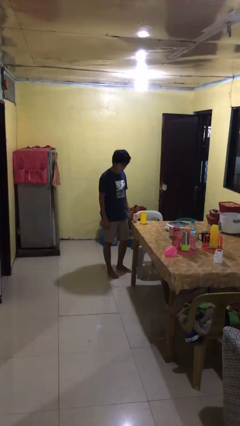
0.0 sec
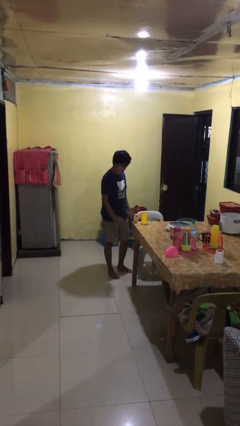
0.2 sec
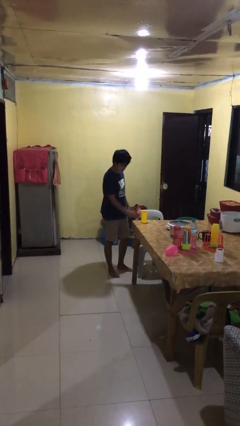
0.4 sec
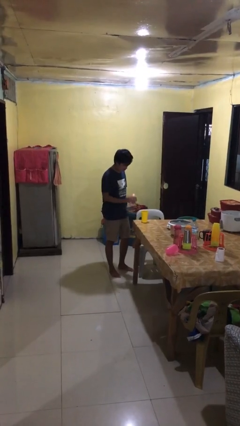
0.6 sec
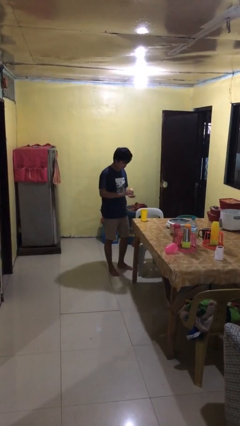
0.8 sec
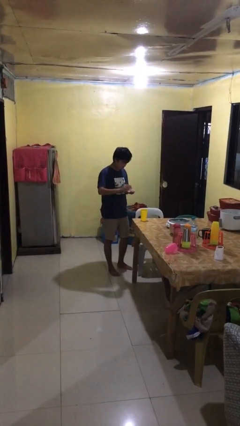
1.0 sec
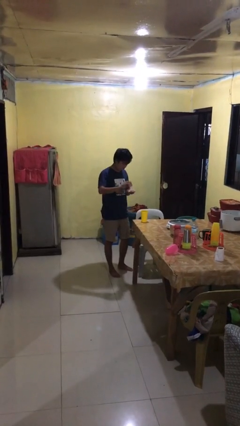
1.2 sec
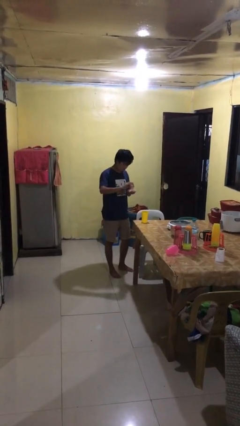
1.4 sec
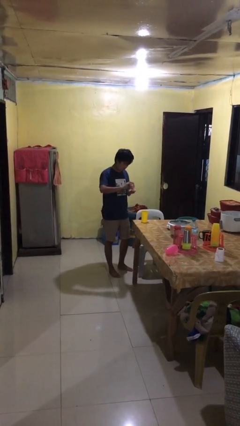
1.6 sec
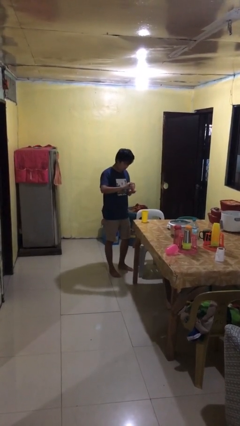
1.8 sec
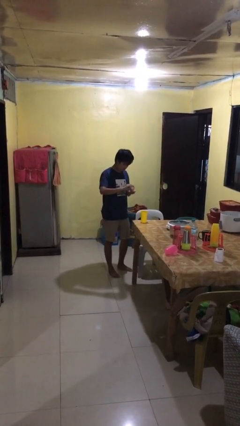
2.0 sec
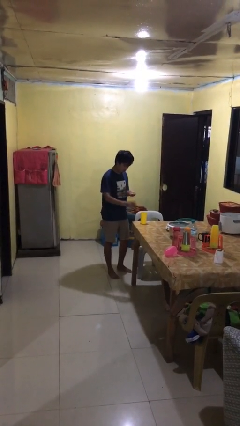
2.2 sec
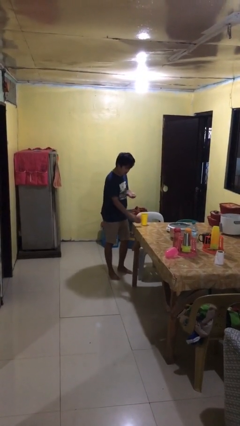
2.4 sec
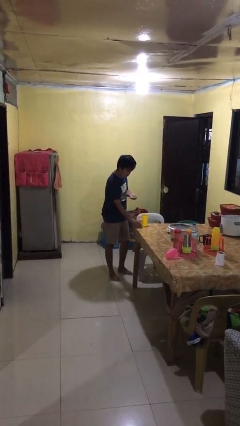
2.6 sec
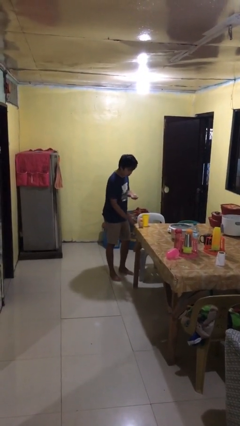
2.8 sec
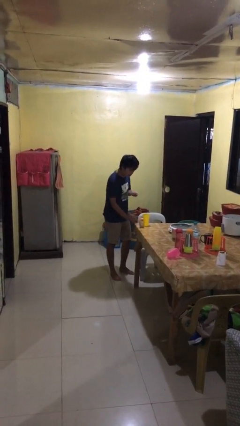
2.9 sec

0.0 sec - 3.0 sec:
person takes medicine pills

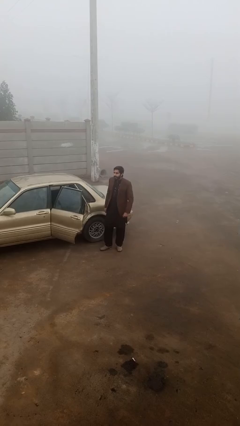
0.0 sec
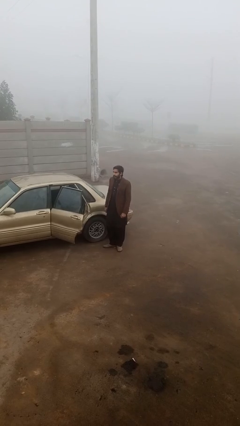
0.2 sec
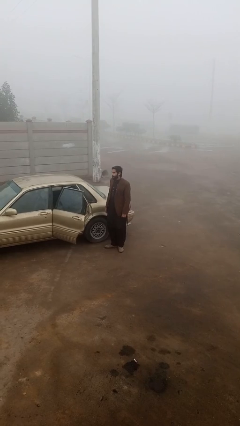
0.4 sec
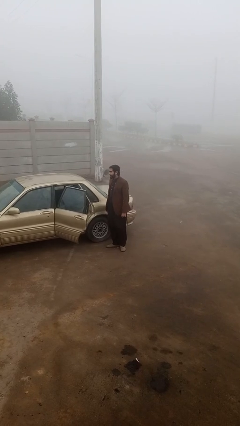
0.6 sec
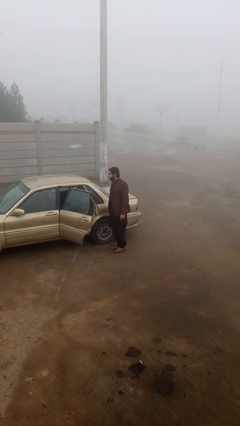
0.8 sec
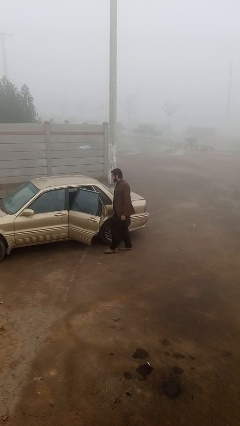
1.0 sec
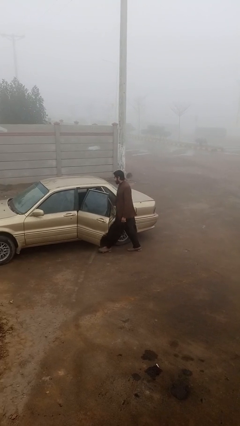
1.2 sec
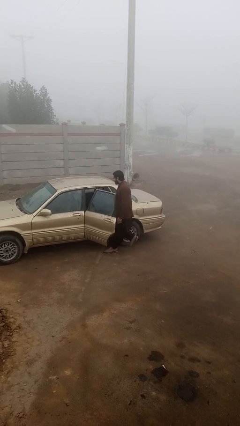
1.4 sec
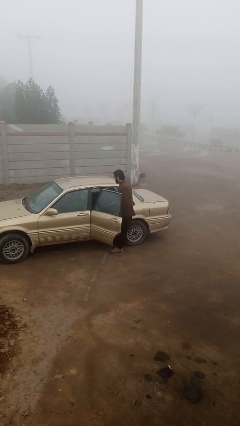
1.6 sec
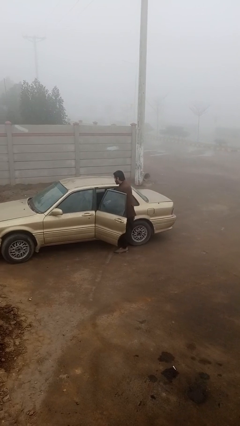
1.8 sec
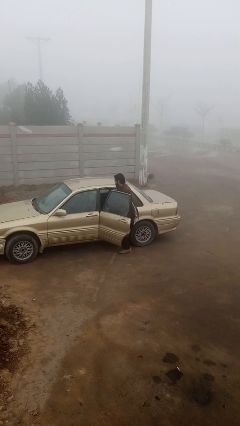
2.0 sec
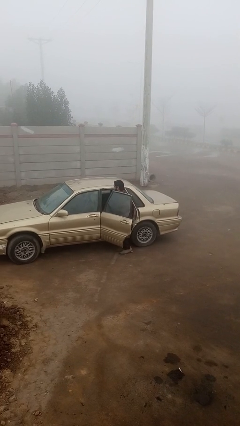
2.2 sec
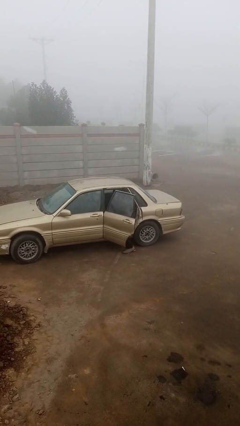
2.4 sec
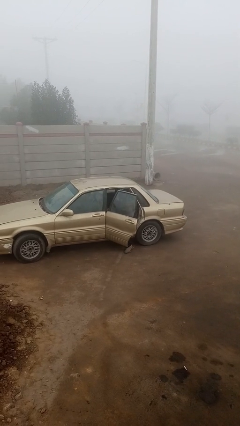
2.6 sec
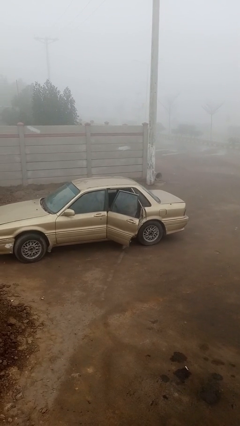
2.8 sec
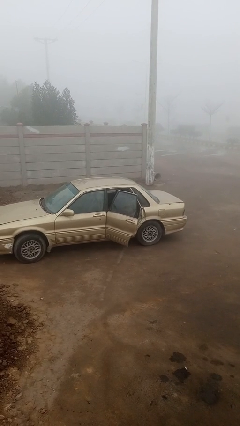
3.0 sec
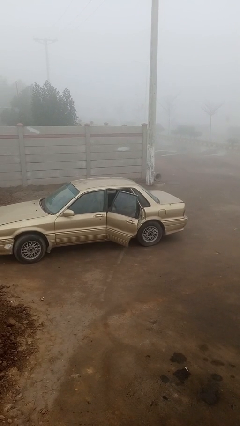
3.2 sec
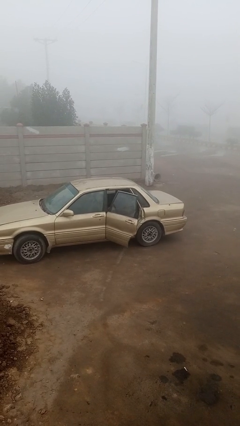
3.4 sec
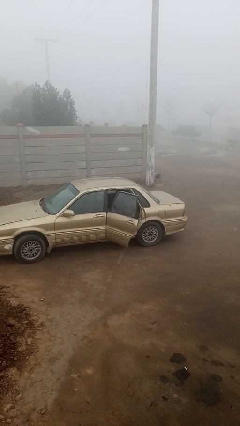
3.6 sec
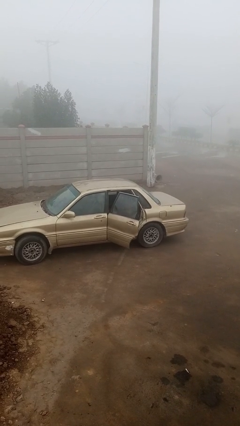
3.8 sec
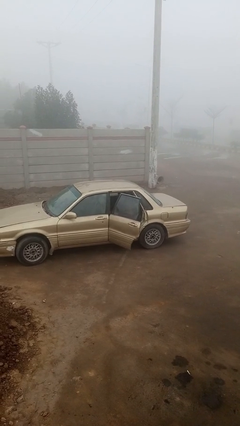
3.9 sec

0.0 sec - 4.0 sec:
person enters car

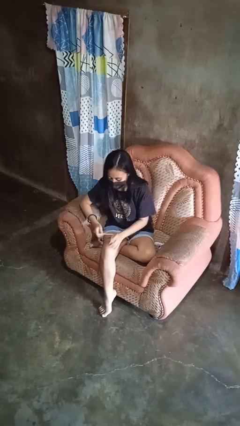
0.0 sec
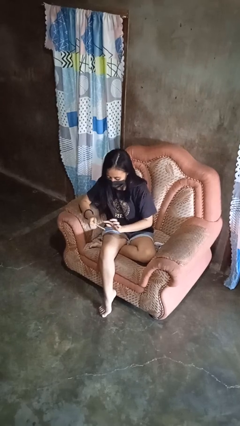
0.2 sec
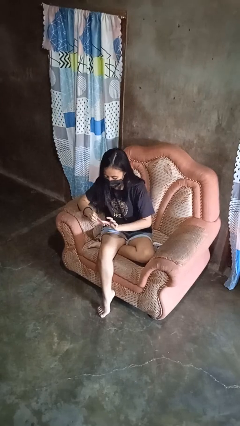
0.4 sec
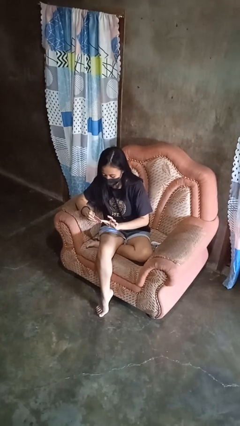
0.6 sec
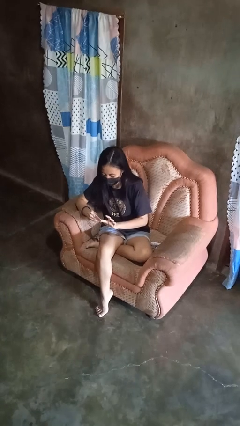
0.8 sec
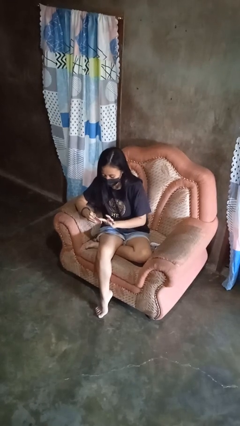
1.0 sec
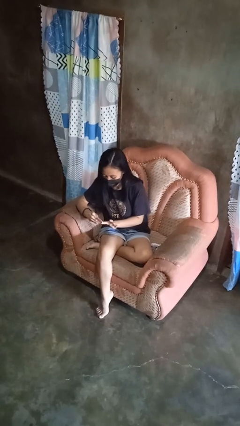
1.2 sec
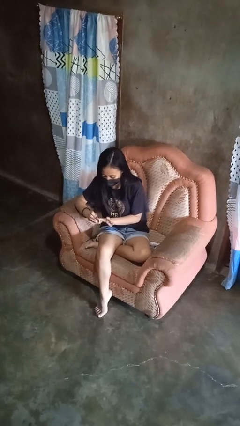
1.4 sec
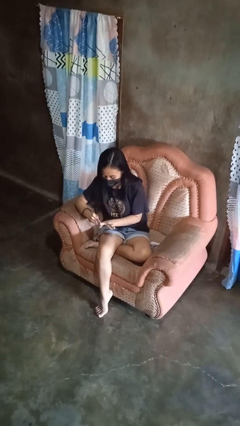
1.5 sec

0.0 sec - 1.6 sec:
person files fingernails

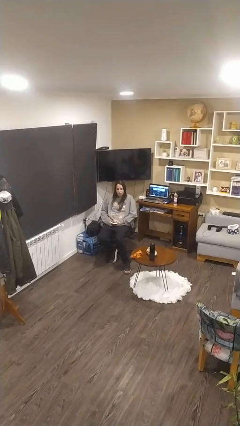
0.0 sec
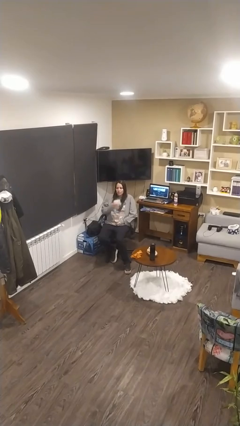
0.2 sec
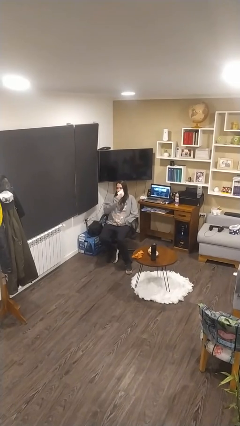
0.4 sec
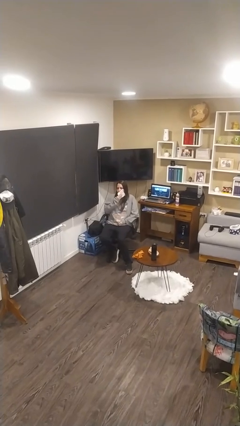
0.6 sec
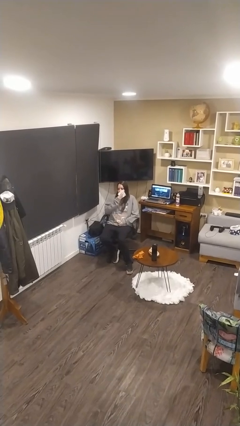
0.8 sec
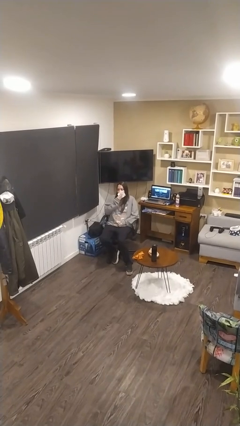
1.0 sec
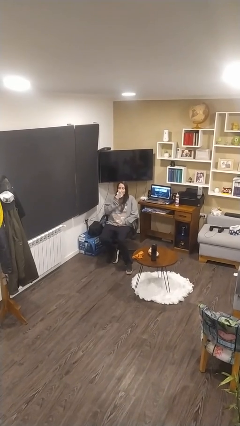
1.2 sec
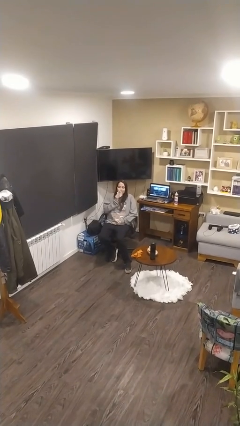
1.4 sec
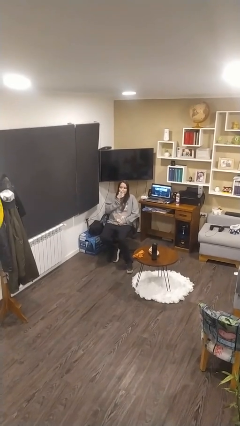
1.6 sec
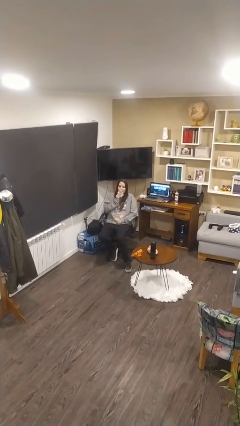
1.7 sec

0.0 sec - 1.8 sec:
person wipes mouth with napkin

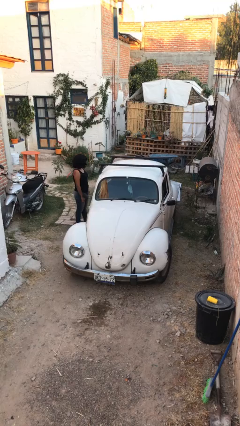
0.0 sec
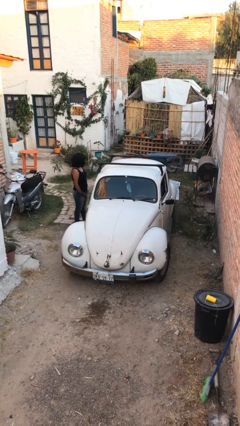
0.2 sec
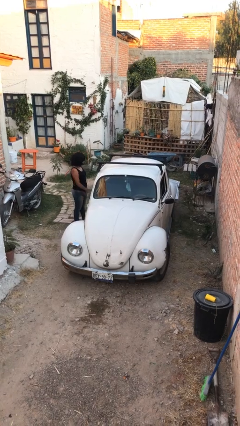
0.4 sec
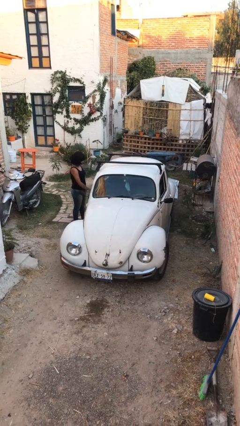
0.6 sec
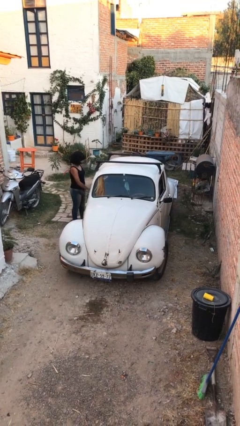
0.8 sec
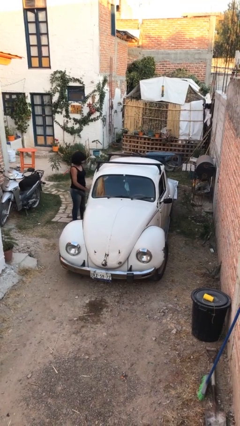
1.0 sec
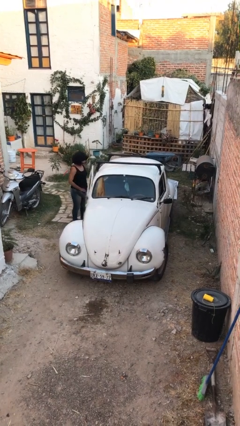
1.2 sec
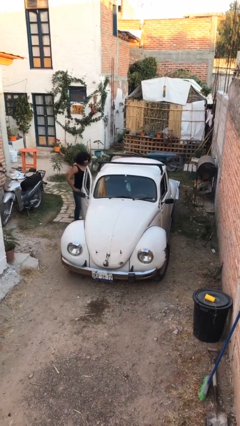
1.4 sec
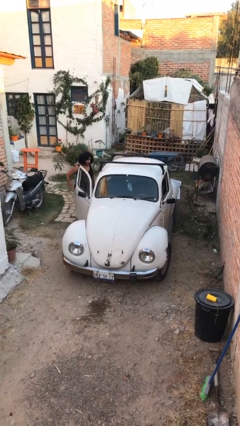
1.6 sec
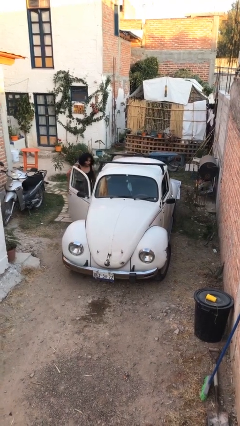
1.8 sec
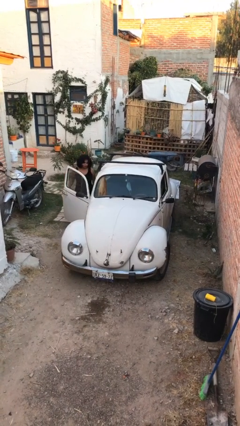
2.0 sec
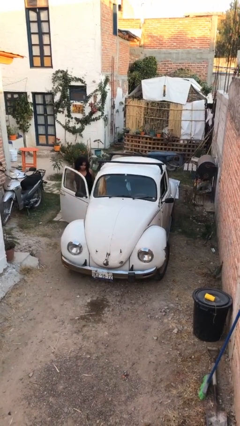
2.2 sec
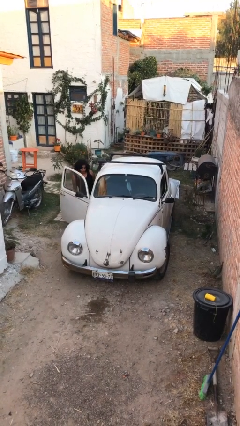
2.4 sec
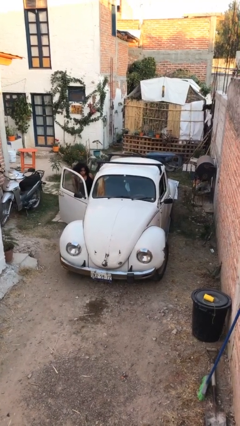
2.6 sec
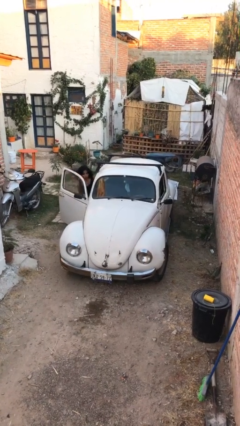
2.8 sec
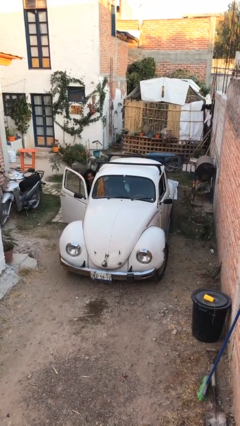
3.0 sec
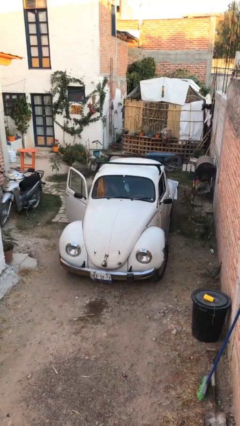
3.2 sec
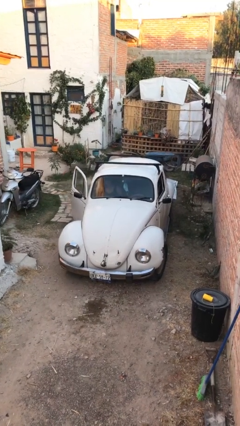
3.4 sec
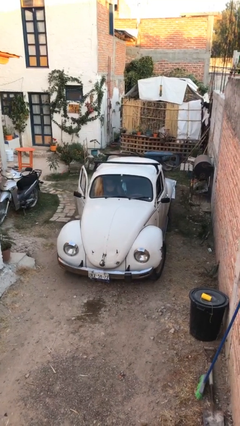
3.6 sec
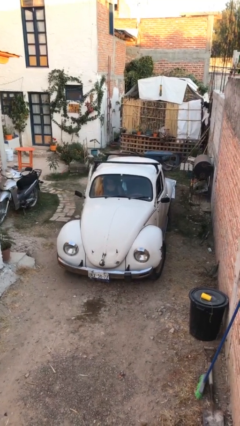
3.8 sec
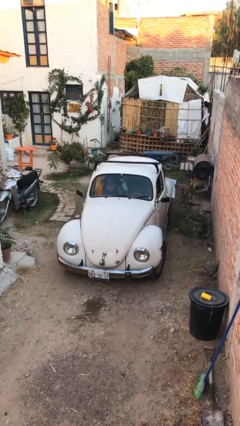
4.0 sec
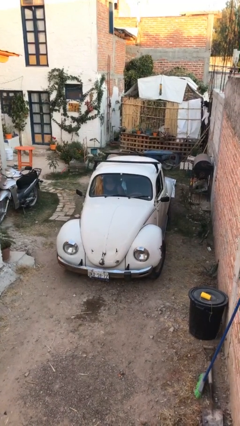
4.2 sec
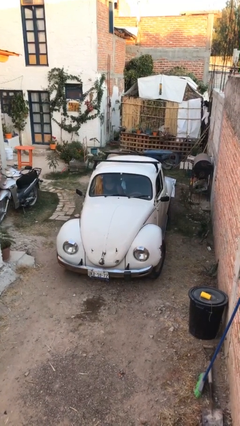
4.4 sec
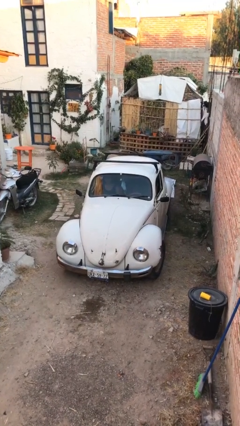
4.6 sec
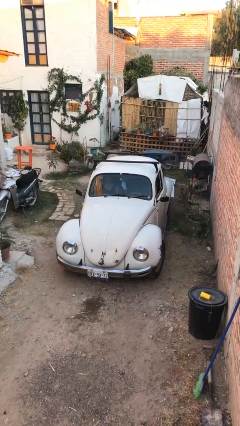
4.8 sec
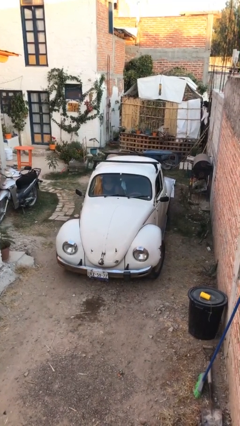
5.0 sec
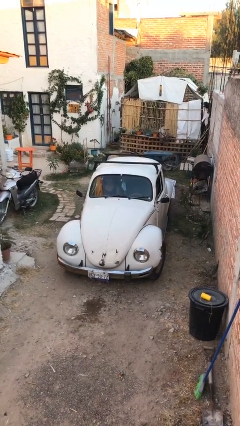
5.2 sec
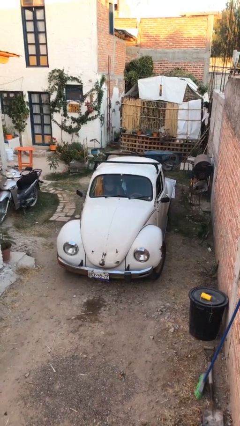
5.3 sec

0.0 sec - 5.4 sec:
car picks up person

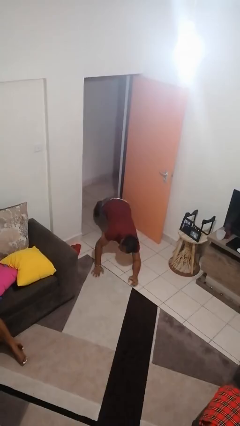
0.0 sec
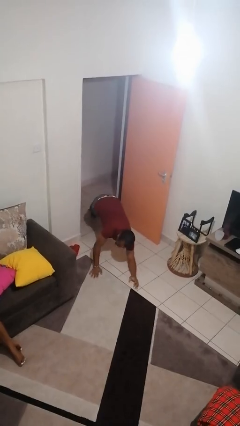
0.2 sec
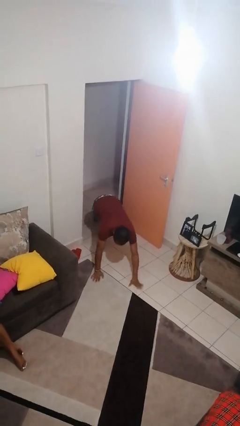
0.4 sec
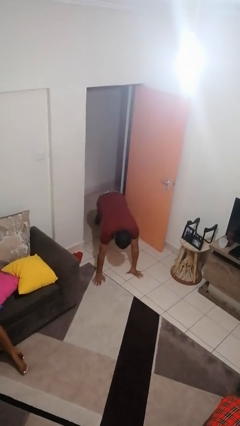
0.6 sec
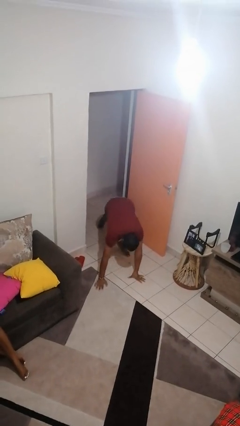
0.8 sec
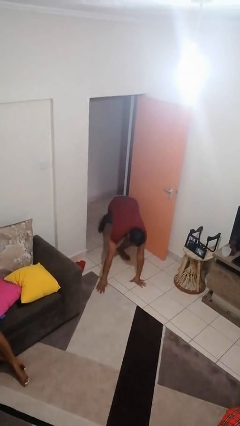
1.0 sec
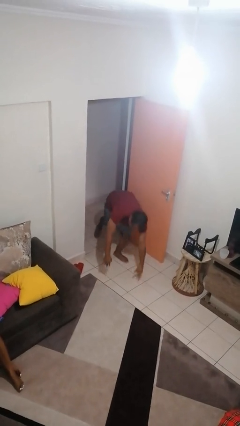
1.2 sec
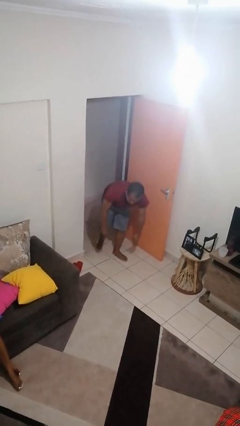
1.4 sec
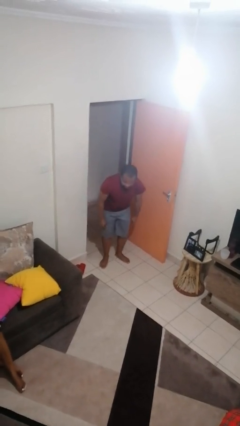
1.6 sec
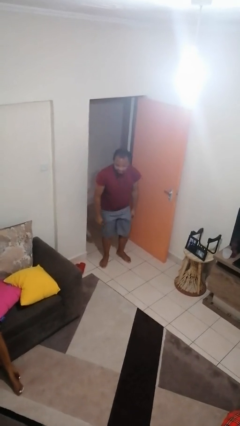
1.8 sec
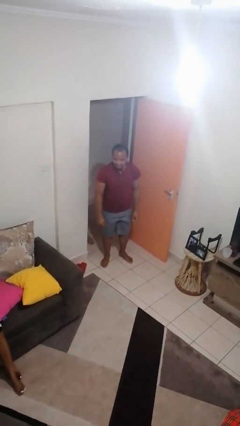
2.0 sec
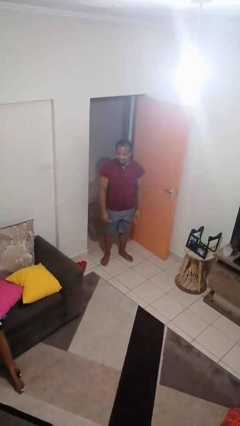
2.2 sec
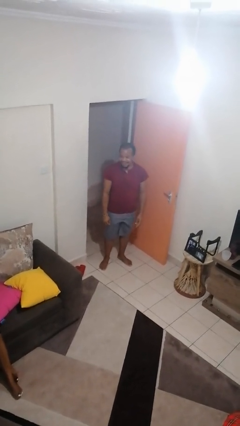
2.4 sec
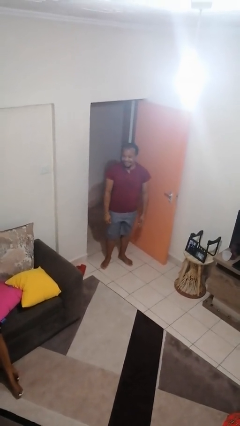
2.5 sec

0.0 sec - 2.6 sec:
person stands up from floor
